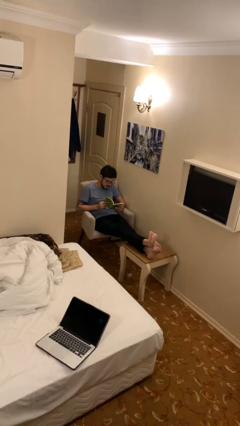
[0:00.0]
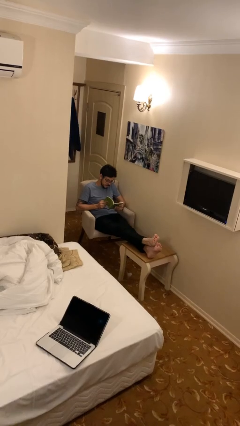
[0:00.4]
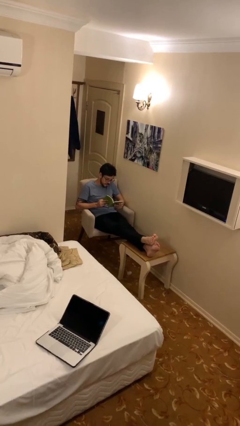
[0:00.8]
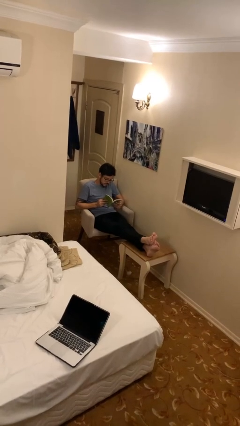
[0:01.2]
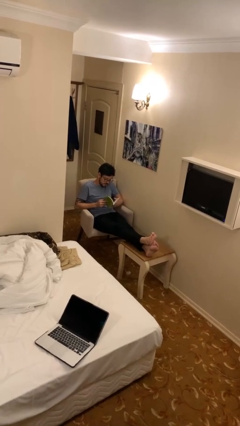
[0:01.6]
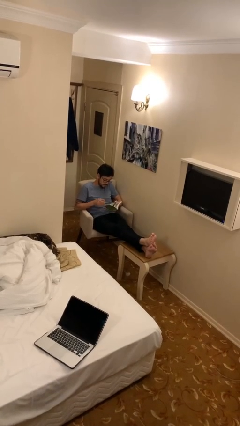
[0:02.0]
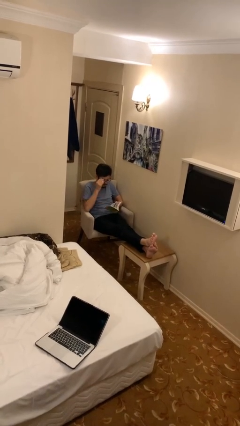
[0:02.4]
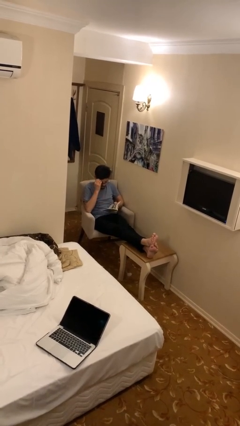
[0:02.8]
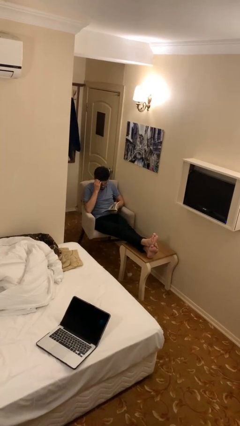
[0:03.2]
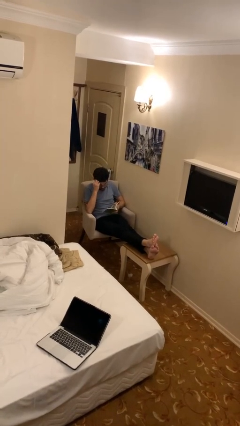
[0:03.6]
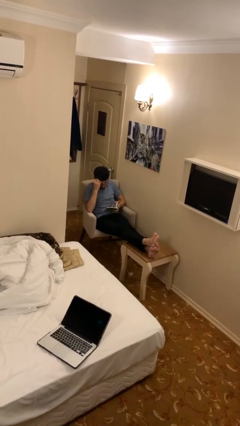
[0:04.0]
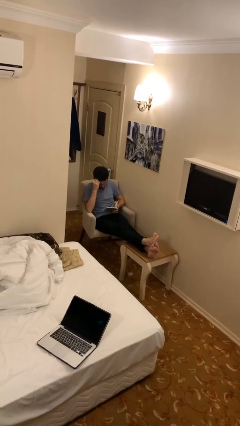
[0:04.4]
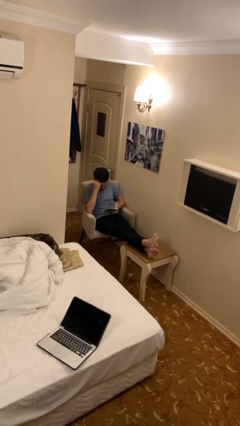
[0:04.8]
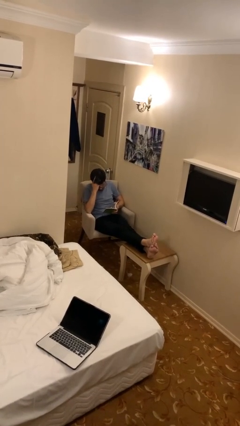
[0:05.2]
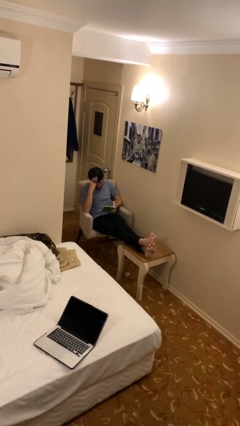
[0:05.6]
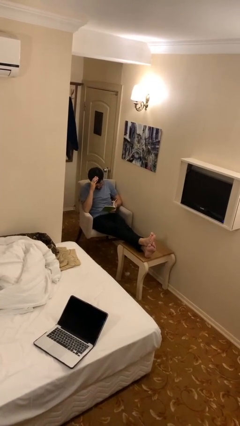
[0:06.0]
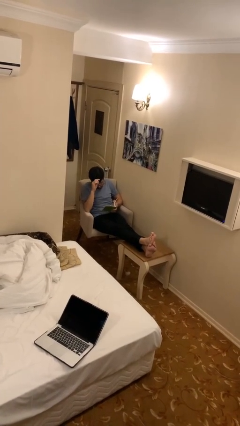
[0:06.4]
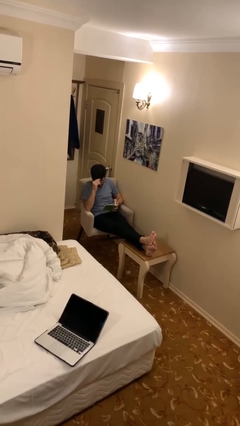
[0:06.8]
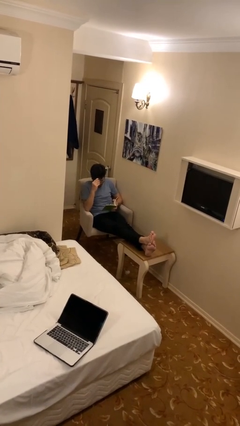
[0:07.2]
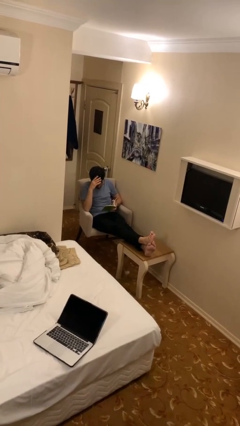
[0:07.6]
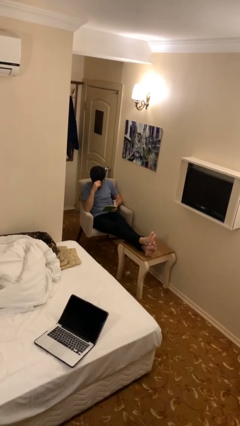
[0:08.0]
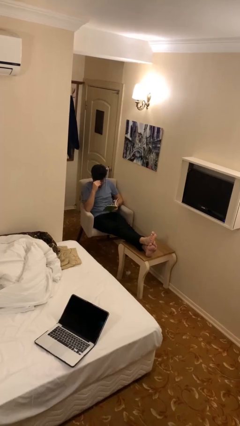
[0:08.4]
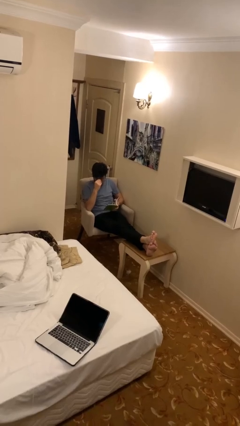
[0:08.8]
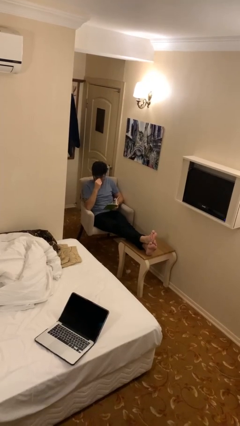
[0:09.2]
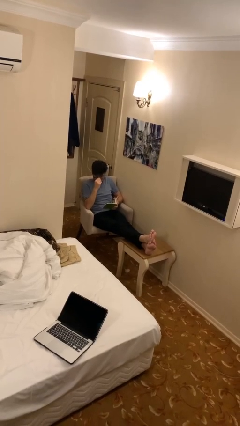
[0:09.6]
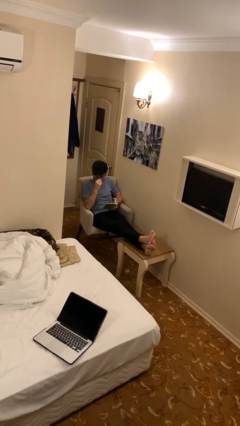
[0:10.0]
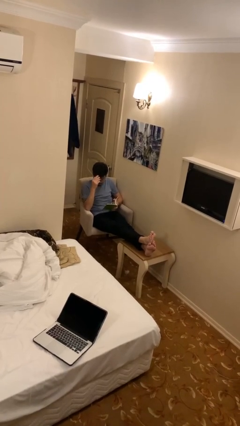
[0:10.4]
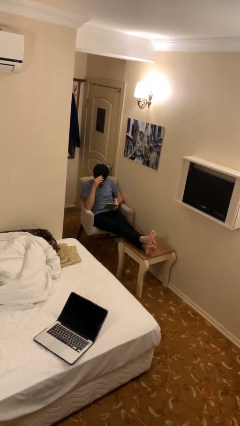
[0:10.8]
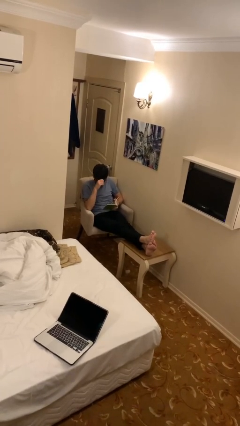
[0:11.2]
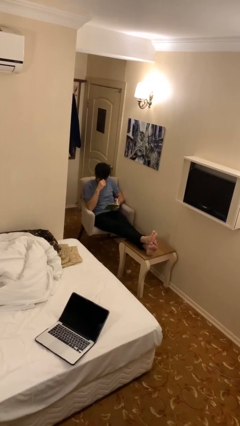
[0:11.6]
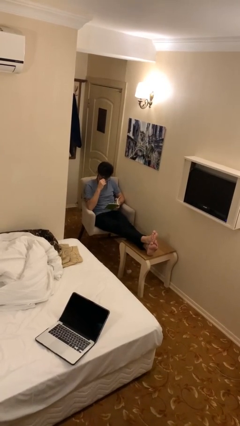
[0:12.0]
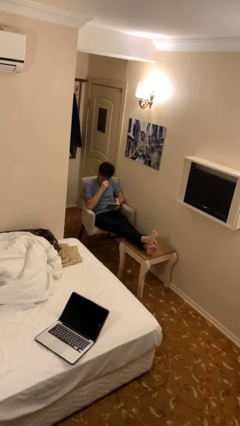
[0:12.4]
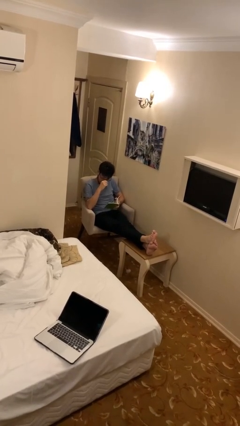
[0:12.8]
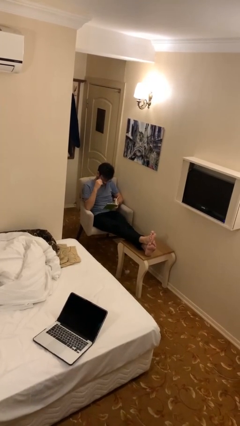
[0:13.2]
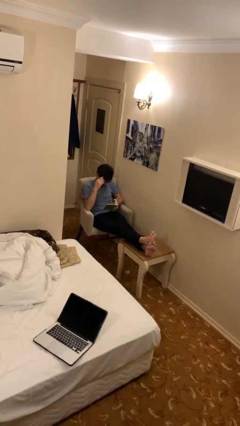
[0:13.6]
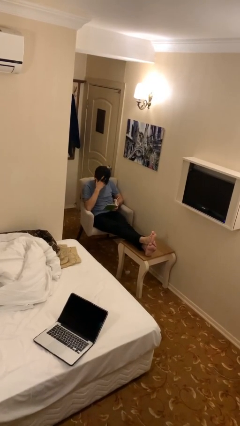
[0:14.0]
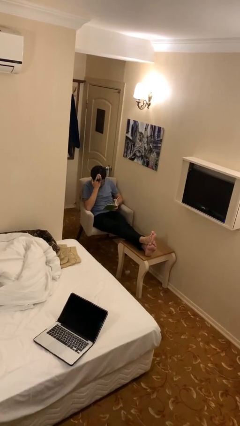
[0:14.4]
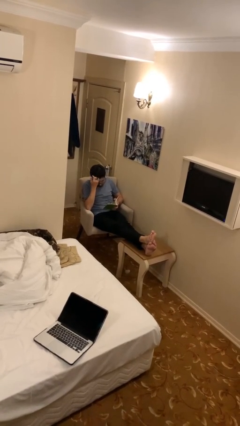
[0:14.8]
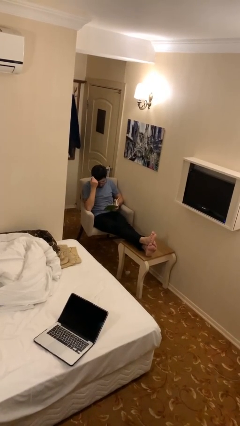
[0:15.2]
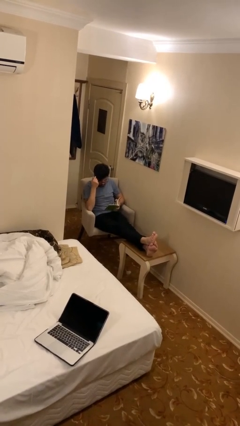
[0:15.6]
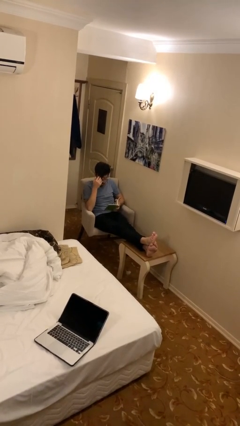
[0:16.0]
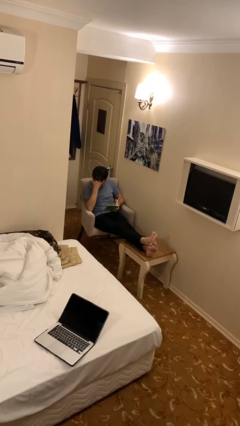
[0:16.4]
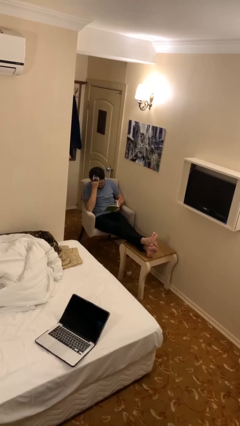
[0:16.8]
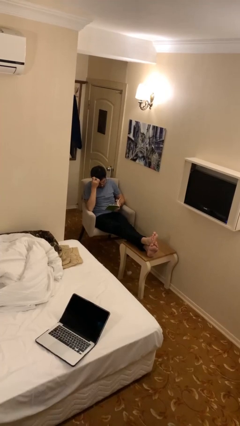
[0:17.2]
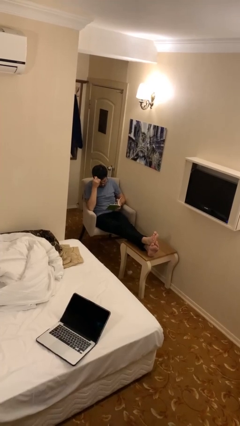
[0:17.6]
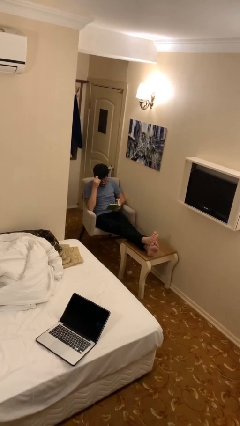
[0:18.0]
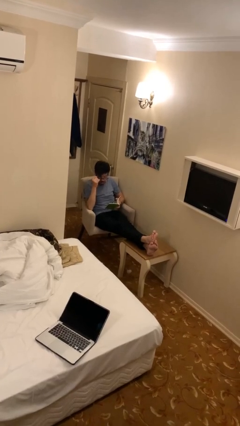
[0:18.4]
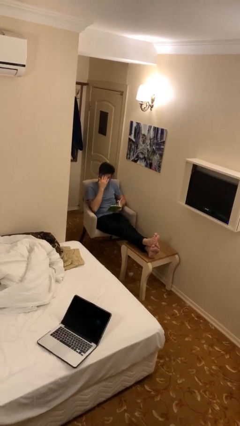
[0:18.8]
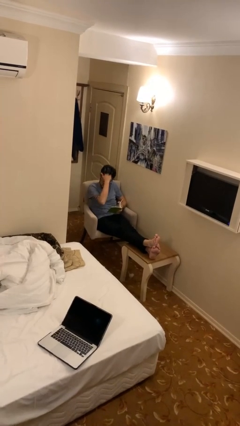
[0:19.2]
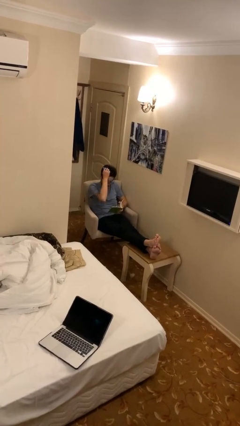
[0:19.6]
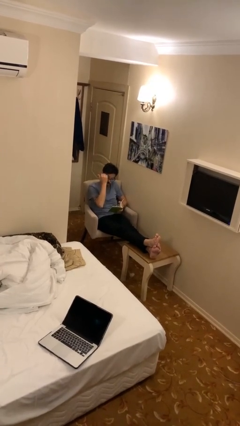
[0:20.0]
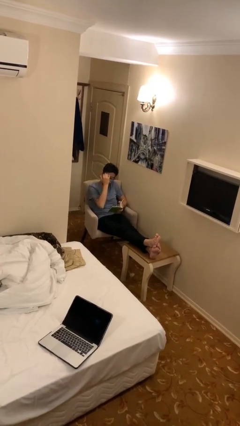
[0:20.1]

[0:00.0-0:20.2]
person reads document

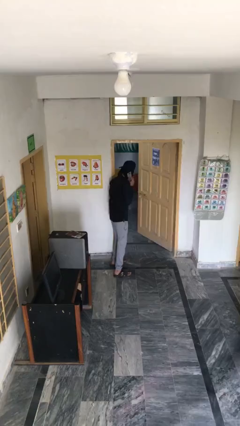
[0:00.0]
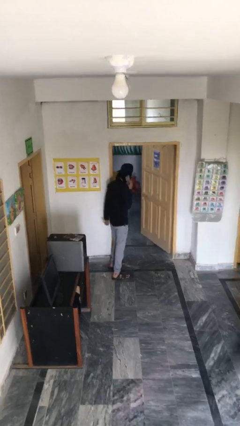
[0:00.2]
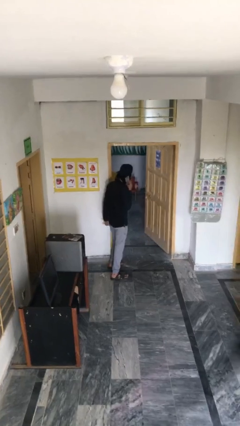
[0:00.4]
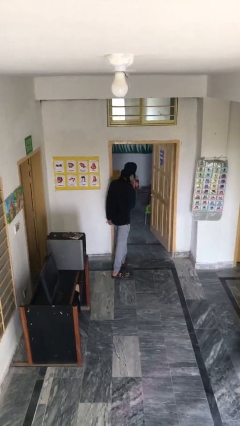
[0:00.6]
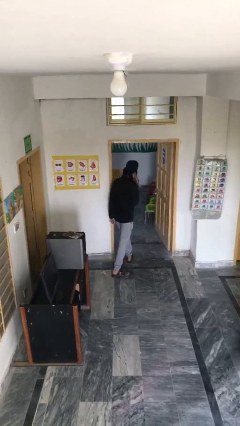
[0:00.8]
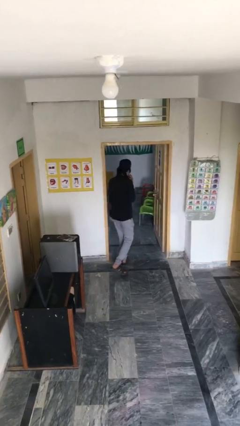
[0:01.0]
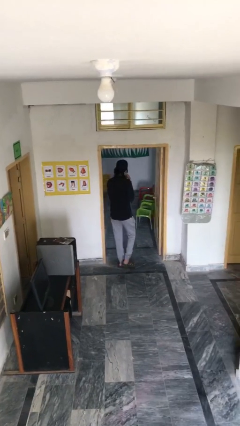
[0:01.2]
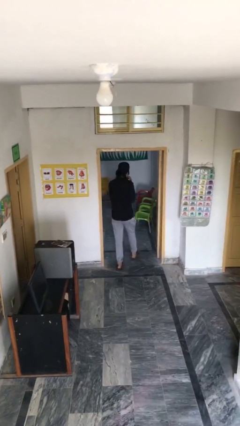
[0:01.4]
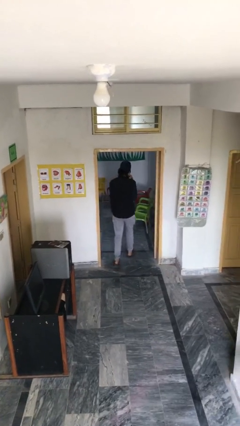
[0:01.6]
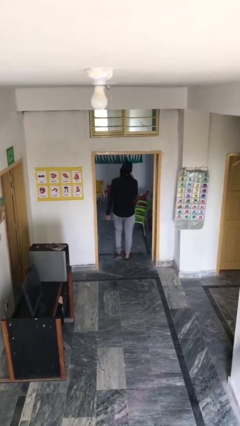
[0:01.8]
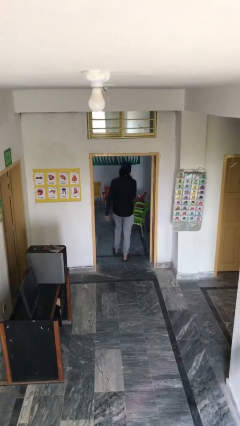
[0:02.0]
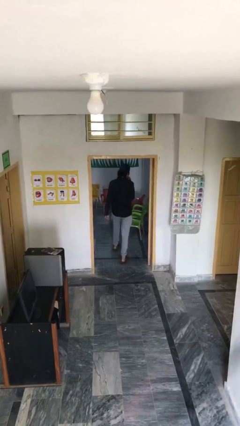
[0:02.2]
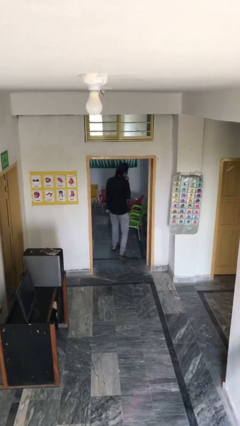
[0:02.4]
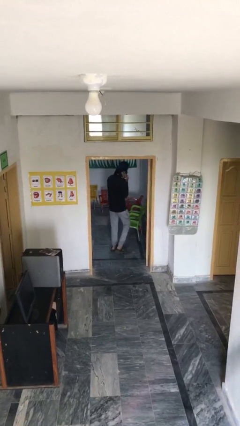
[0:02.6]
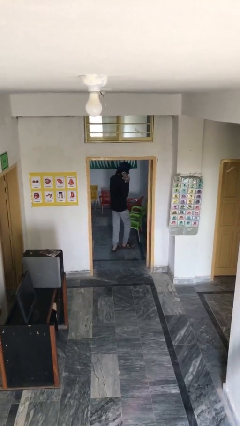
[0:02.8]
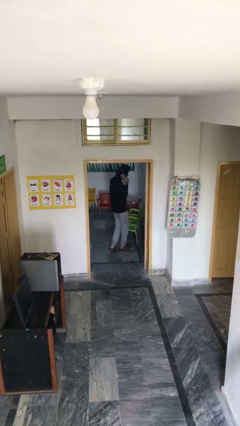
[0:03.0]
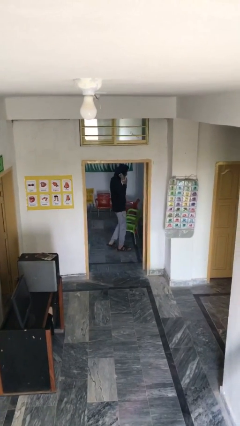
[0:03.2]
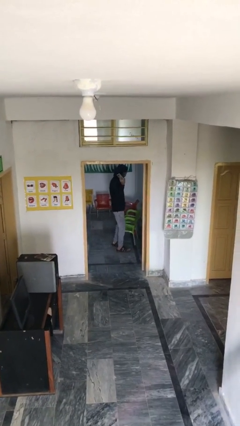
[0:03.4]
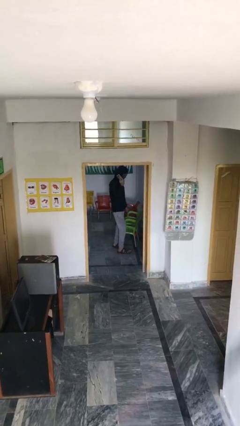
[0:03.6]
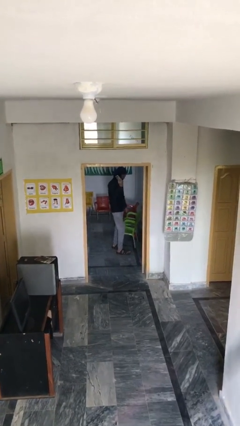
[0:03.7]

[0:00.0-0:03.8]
person exits scene through structure

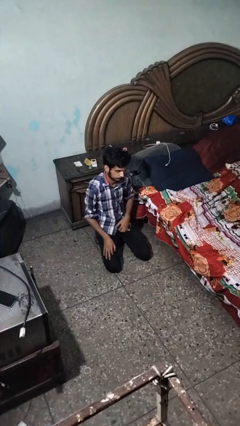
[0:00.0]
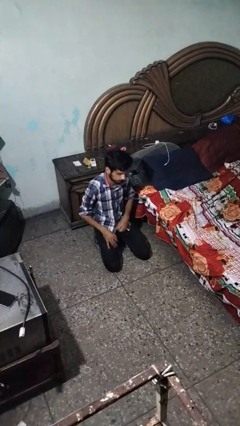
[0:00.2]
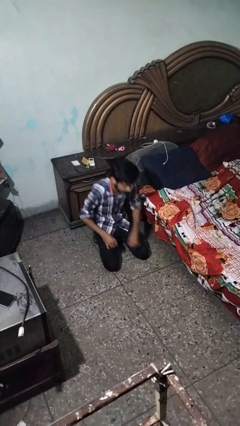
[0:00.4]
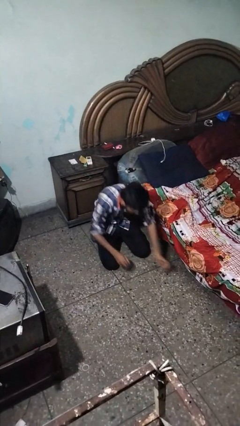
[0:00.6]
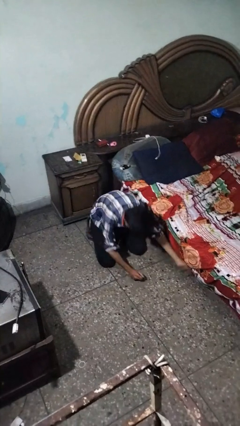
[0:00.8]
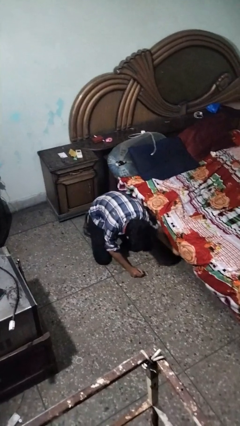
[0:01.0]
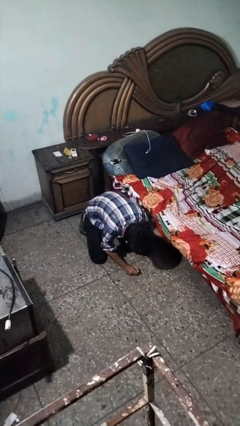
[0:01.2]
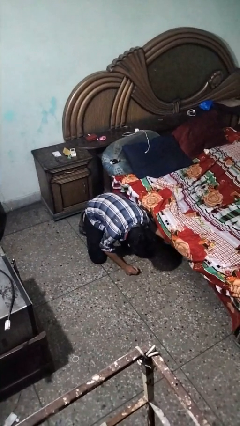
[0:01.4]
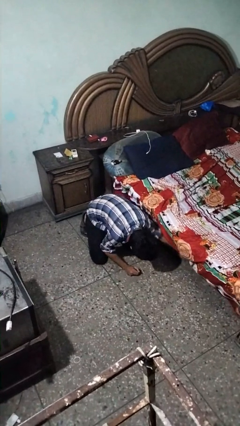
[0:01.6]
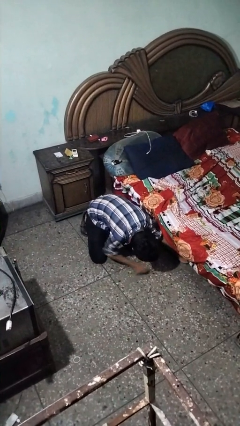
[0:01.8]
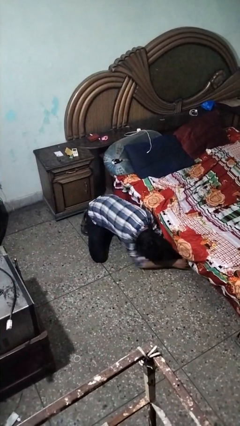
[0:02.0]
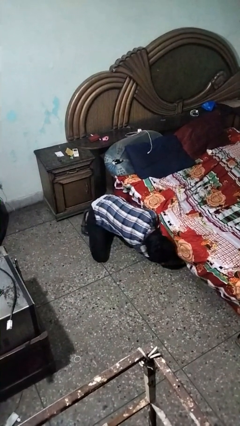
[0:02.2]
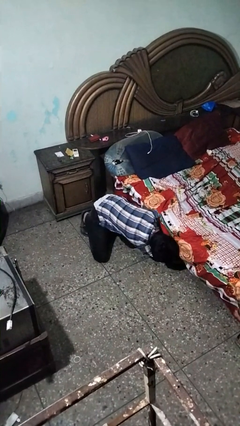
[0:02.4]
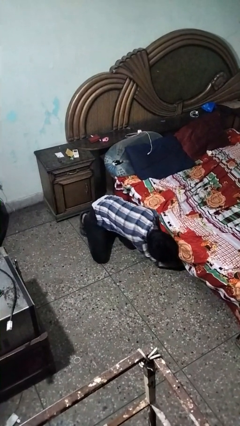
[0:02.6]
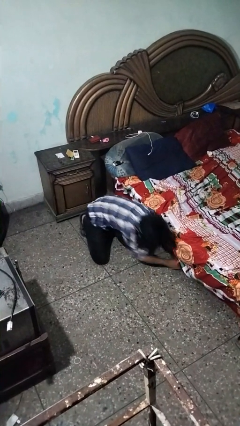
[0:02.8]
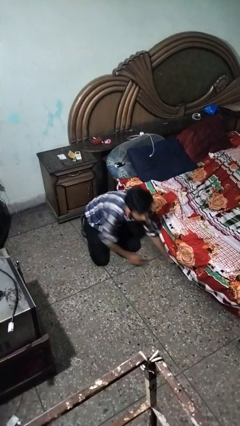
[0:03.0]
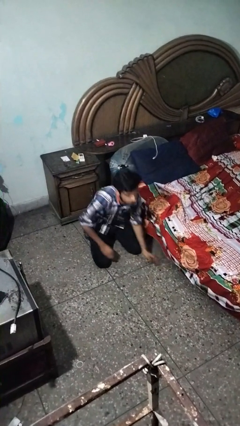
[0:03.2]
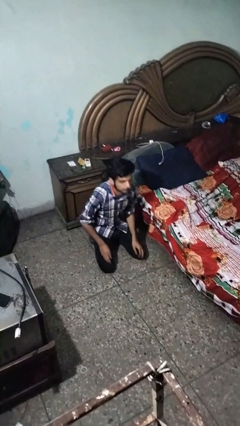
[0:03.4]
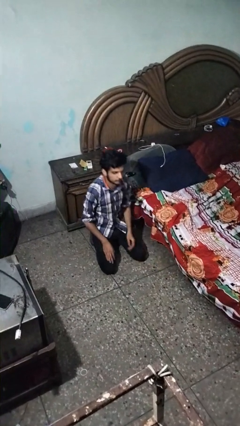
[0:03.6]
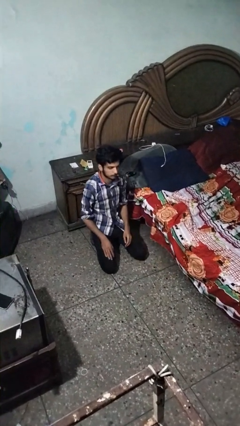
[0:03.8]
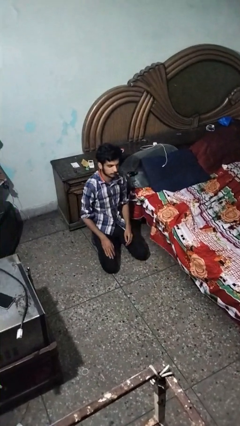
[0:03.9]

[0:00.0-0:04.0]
person searches under bed
